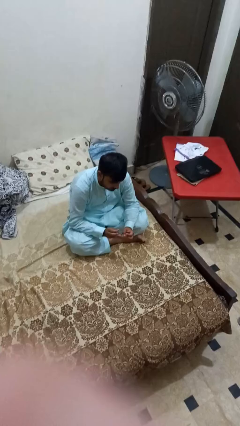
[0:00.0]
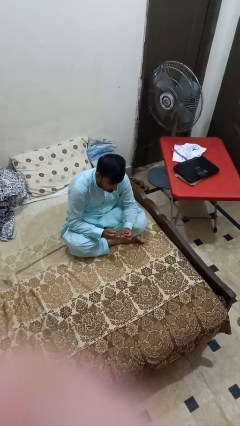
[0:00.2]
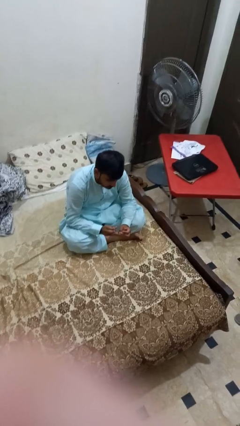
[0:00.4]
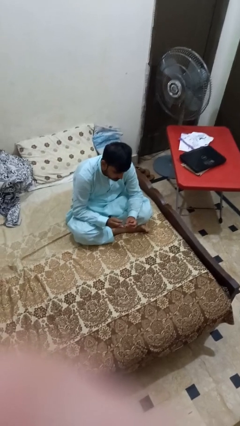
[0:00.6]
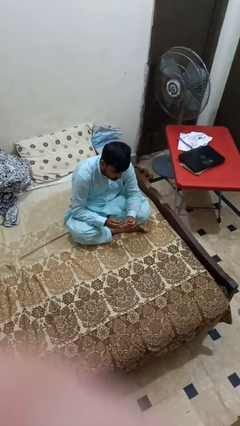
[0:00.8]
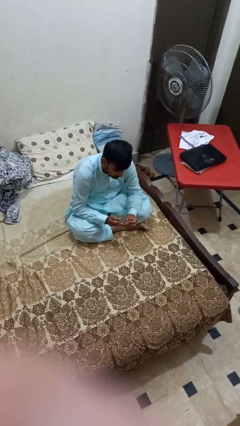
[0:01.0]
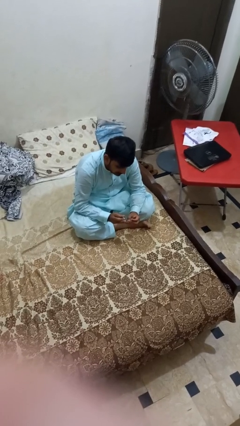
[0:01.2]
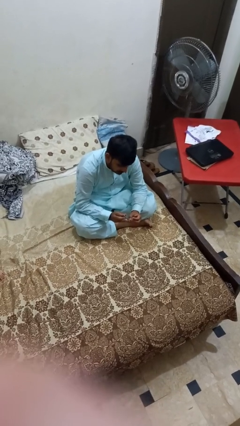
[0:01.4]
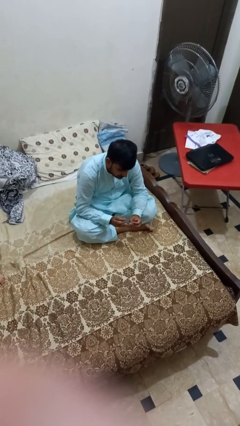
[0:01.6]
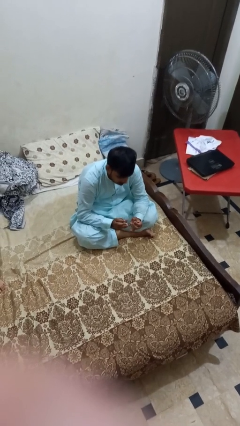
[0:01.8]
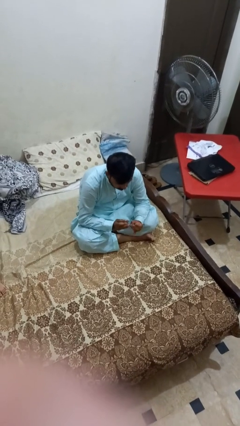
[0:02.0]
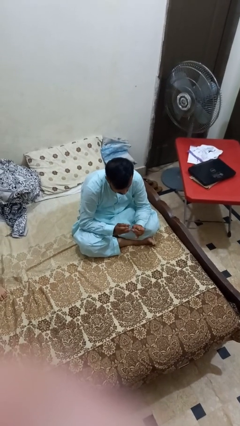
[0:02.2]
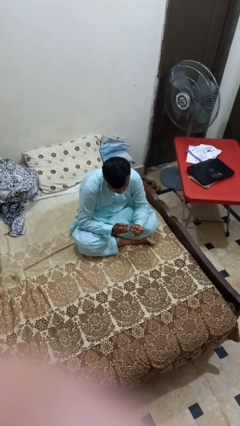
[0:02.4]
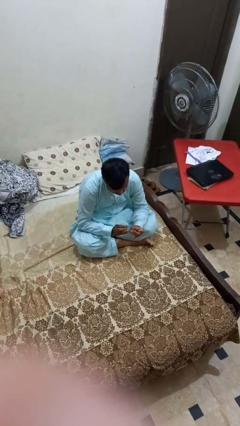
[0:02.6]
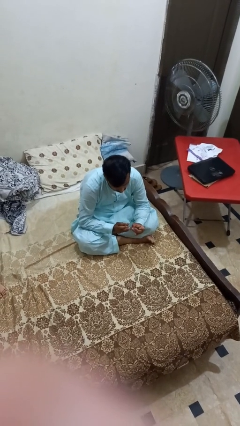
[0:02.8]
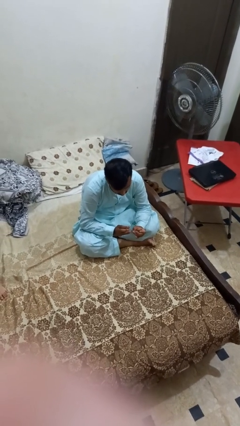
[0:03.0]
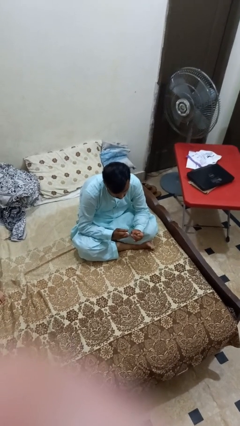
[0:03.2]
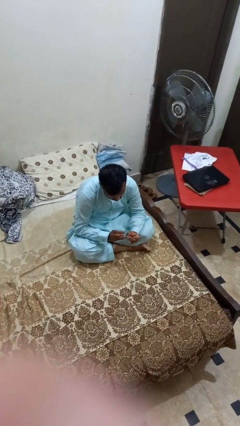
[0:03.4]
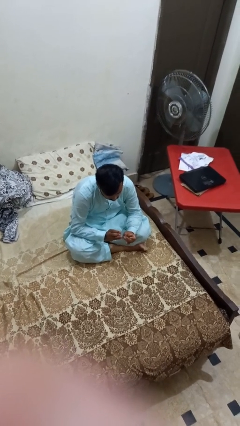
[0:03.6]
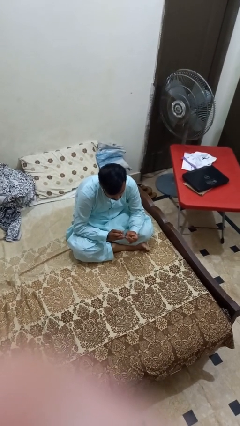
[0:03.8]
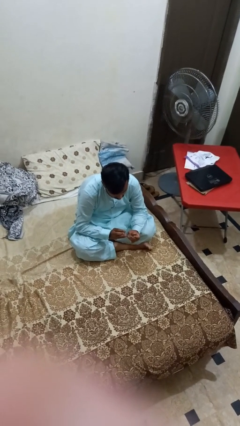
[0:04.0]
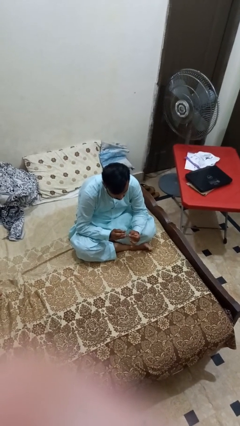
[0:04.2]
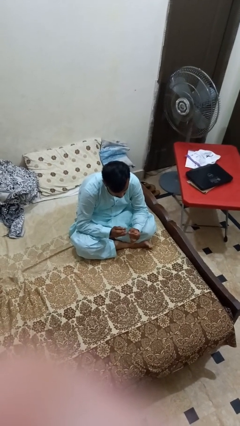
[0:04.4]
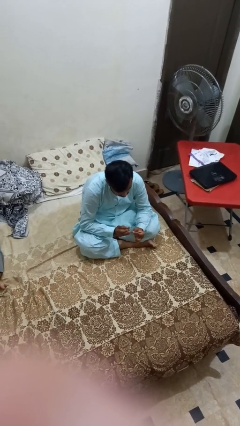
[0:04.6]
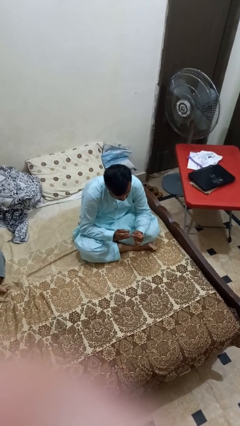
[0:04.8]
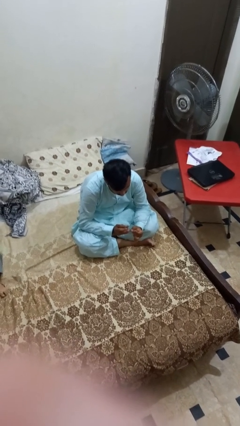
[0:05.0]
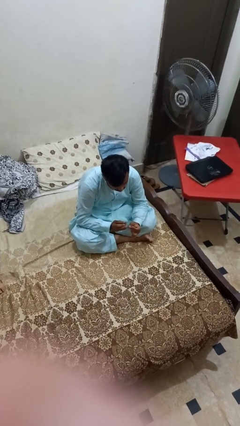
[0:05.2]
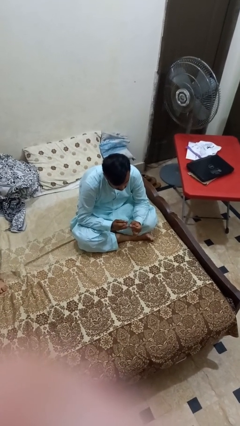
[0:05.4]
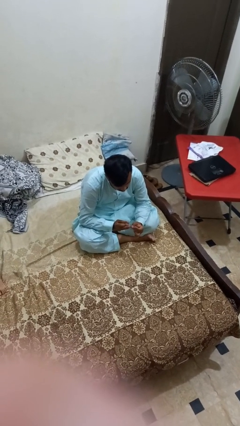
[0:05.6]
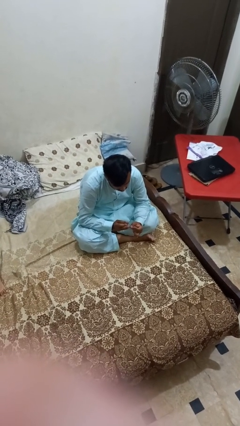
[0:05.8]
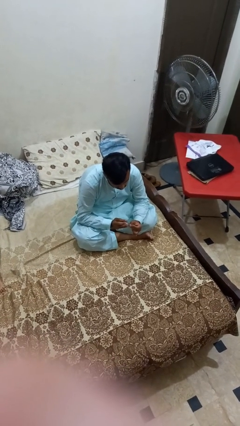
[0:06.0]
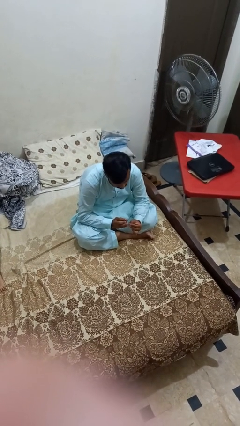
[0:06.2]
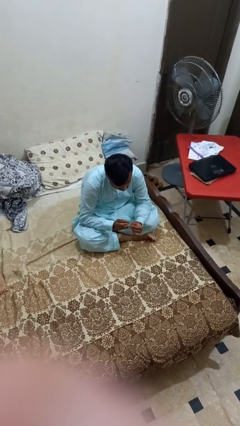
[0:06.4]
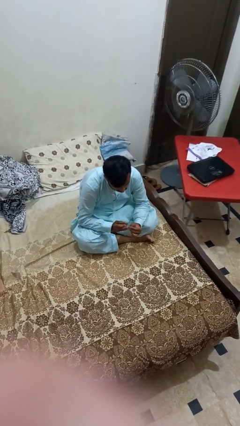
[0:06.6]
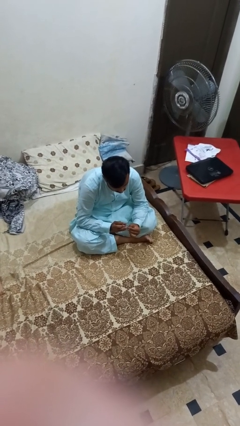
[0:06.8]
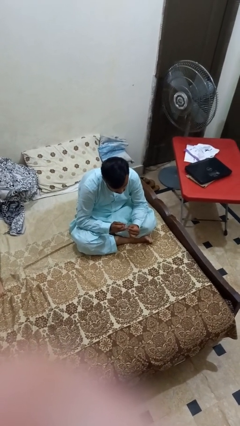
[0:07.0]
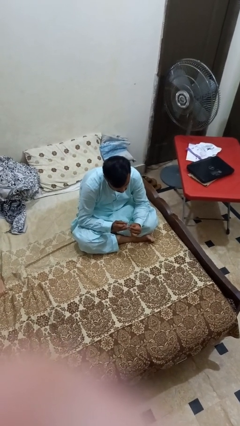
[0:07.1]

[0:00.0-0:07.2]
person clips fingernails

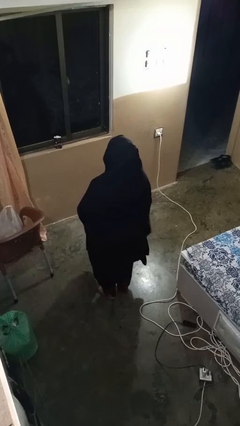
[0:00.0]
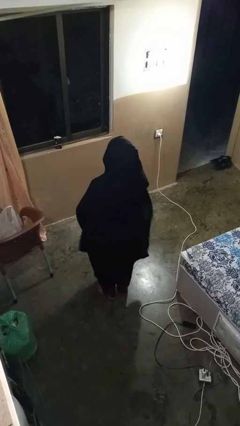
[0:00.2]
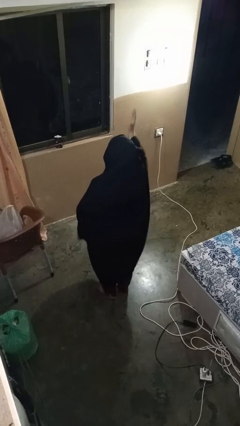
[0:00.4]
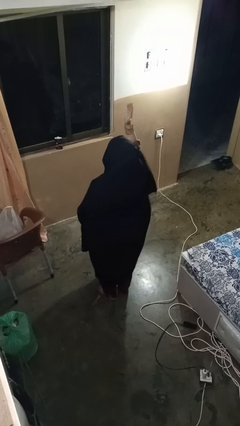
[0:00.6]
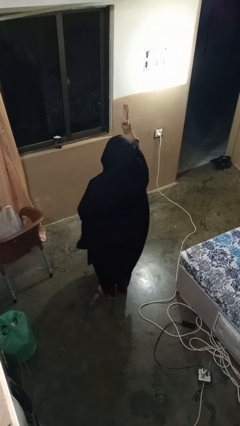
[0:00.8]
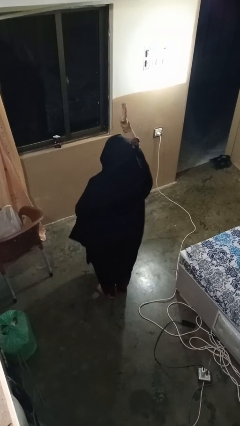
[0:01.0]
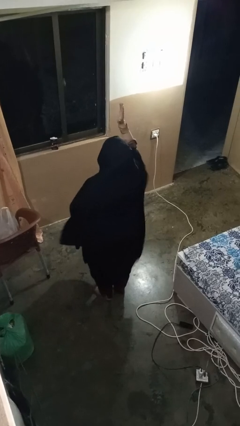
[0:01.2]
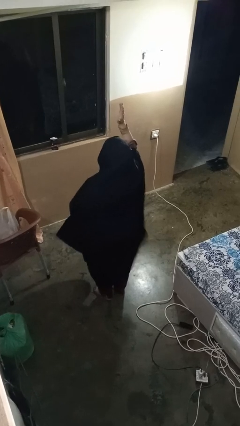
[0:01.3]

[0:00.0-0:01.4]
person gestures raise hand

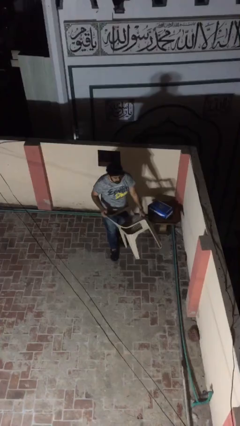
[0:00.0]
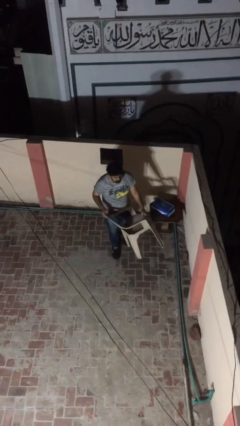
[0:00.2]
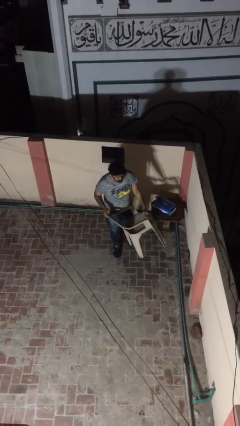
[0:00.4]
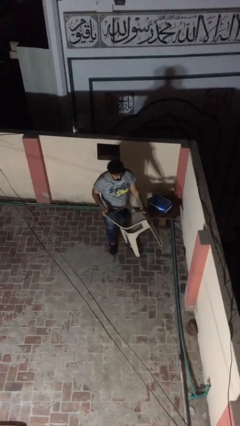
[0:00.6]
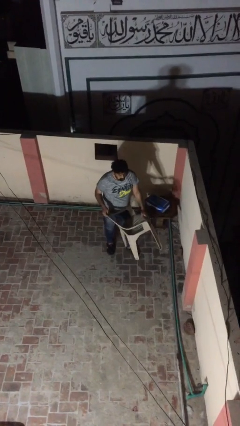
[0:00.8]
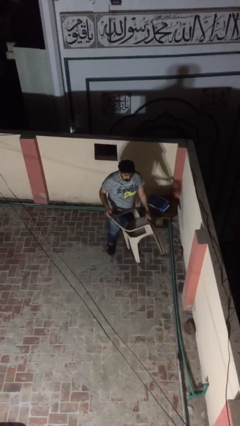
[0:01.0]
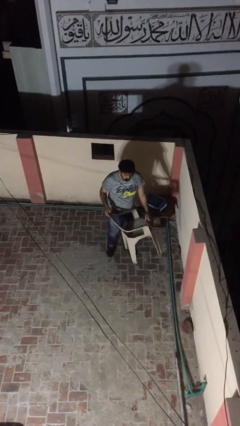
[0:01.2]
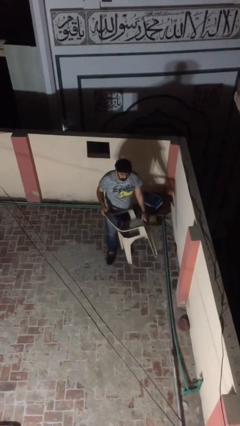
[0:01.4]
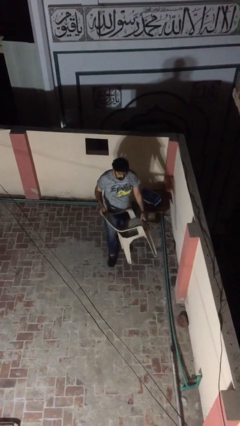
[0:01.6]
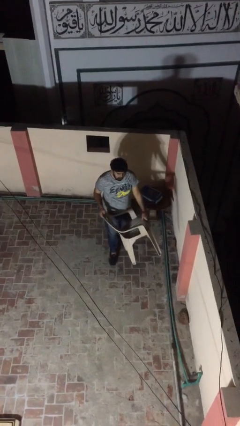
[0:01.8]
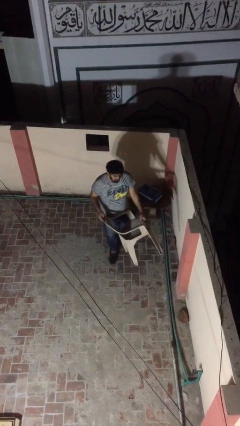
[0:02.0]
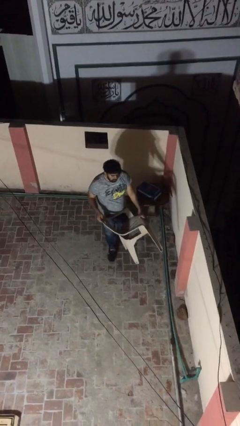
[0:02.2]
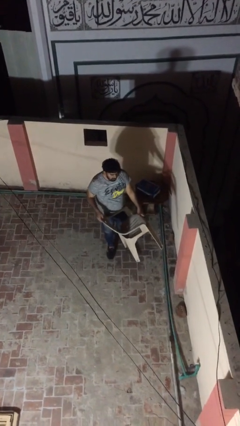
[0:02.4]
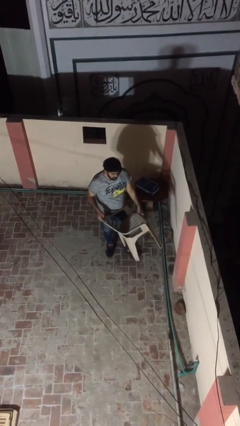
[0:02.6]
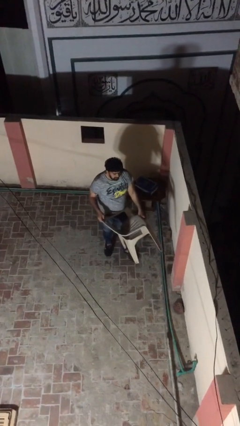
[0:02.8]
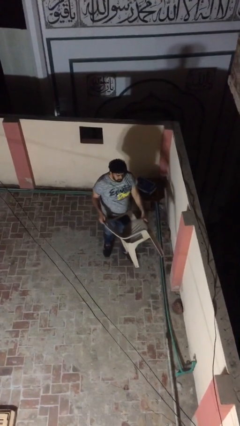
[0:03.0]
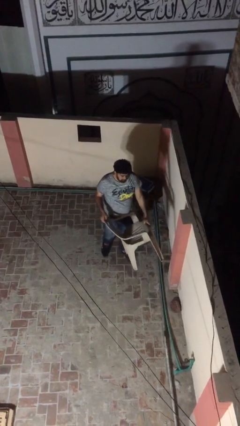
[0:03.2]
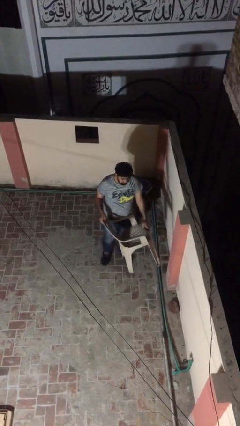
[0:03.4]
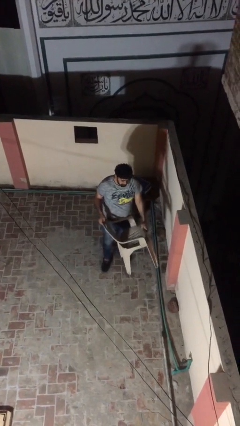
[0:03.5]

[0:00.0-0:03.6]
person carries heavy object

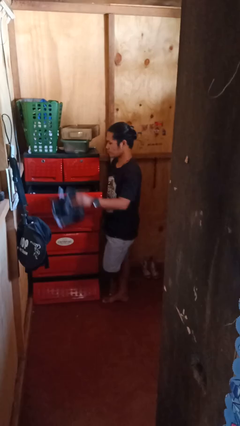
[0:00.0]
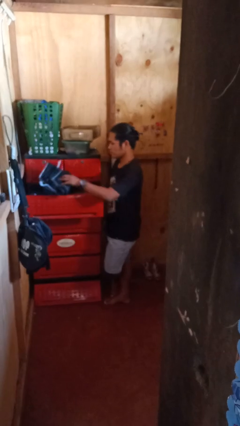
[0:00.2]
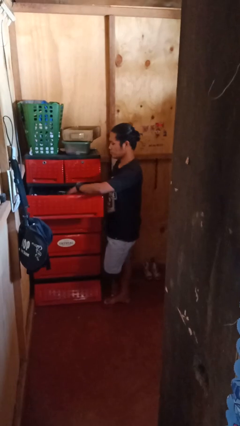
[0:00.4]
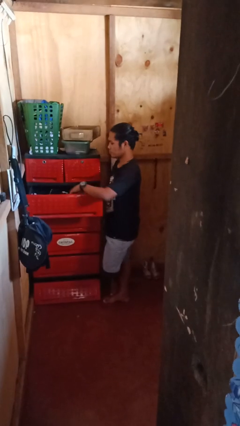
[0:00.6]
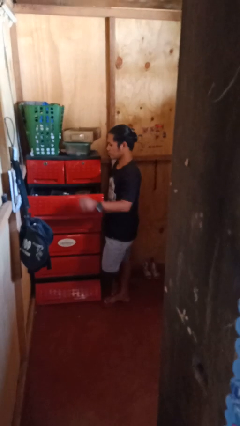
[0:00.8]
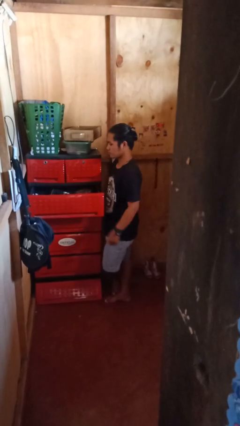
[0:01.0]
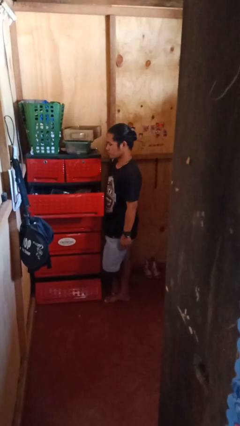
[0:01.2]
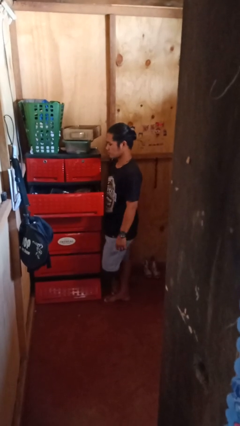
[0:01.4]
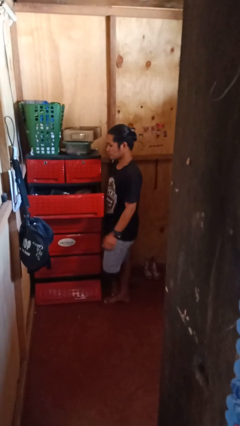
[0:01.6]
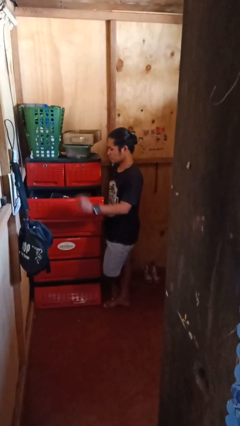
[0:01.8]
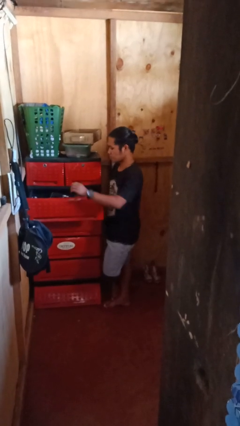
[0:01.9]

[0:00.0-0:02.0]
person puts clothes into dresser

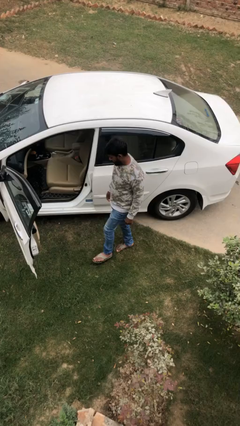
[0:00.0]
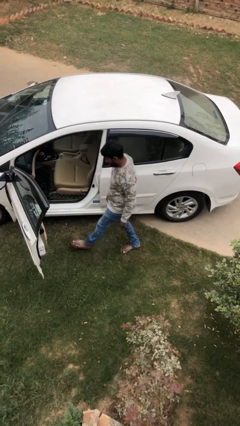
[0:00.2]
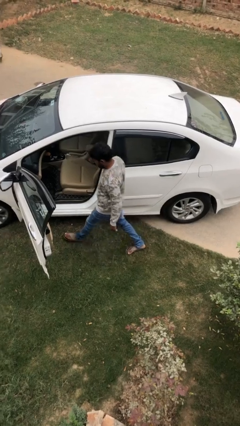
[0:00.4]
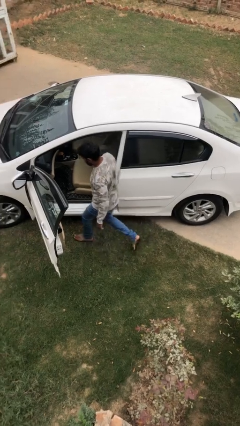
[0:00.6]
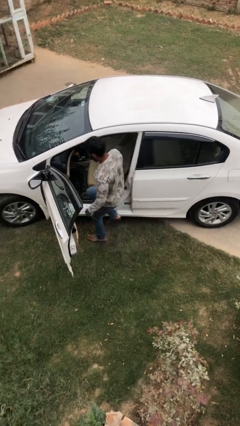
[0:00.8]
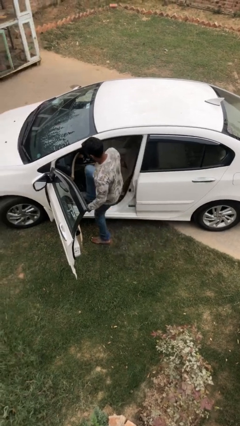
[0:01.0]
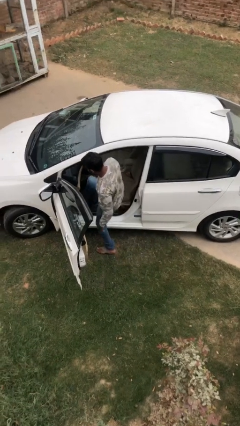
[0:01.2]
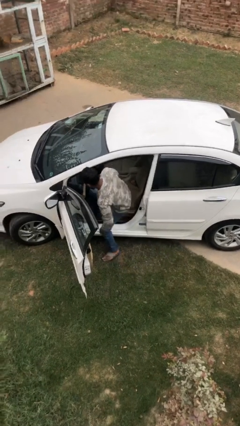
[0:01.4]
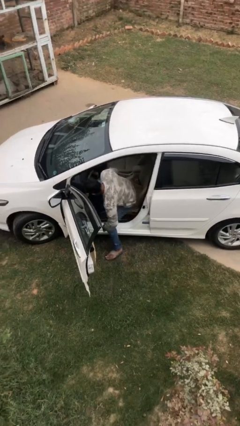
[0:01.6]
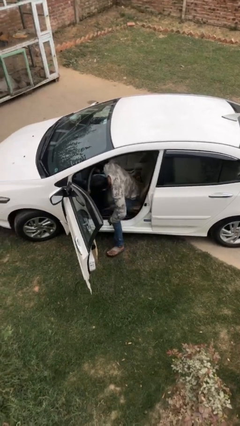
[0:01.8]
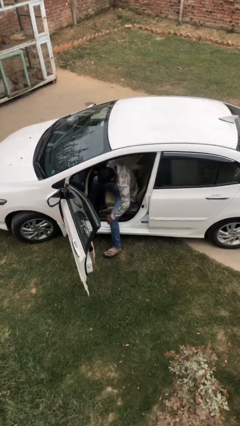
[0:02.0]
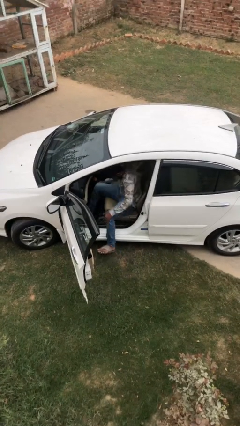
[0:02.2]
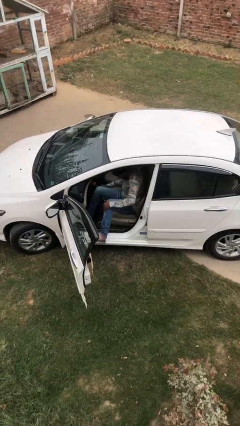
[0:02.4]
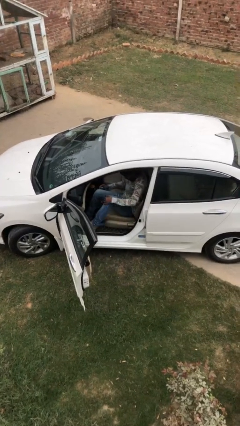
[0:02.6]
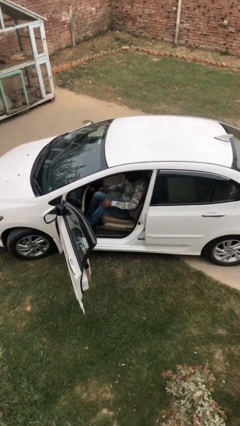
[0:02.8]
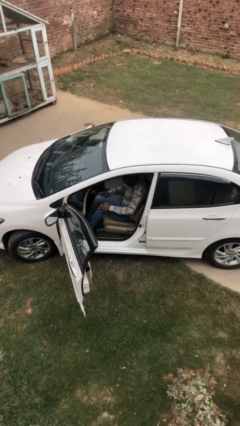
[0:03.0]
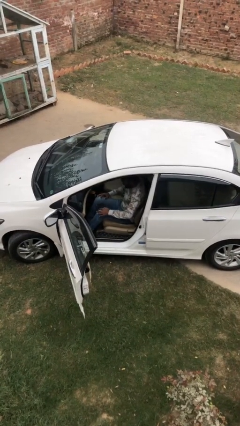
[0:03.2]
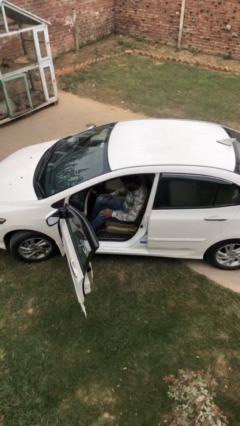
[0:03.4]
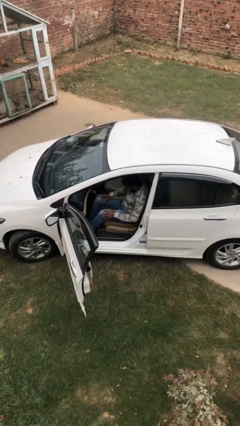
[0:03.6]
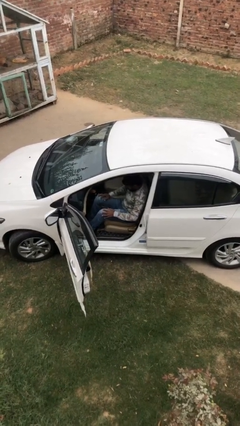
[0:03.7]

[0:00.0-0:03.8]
person enters car
